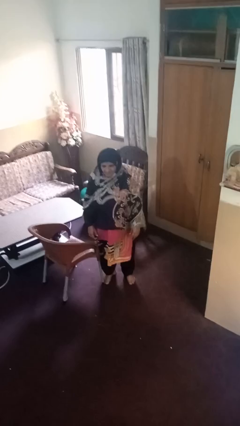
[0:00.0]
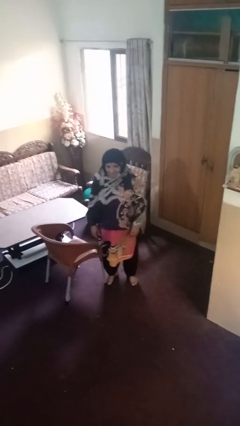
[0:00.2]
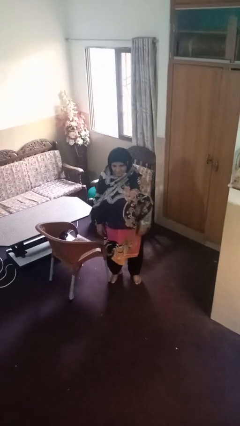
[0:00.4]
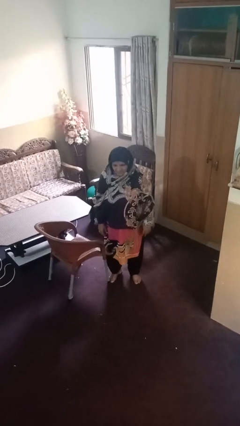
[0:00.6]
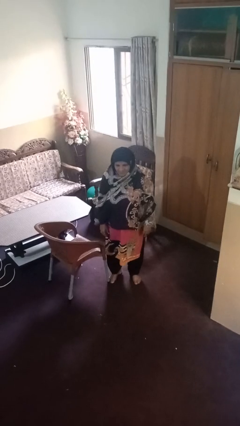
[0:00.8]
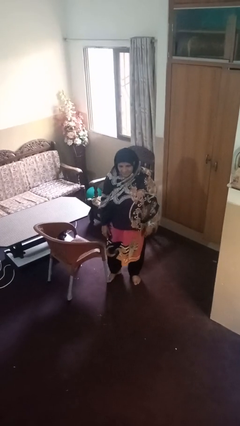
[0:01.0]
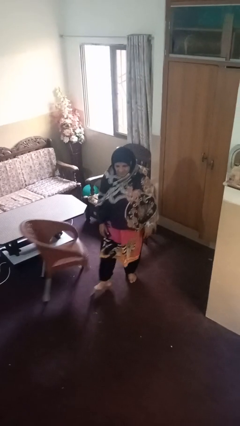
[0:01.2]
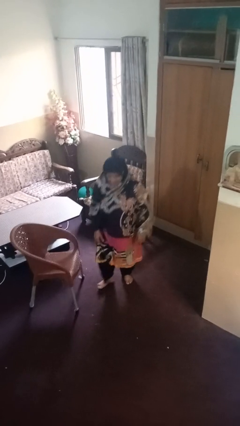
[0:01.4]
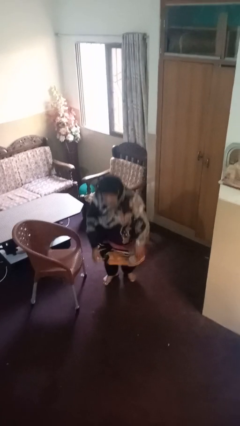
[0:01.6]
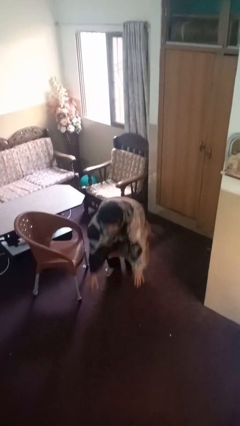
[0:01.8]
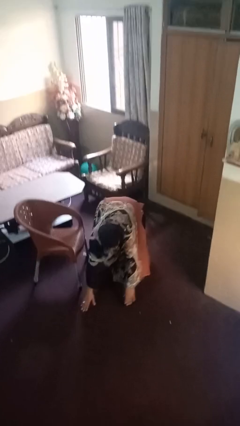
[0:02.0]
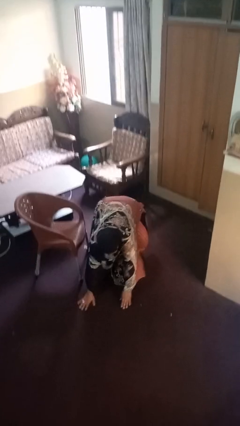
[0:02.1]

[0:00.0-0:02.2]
person trips on object on floor

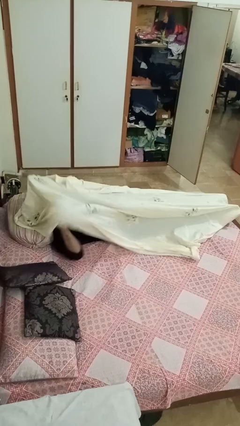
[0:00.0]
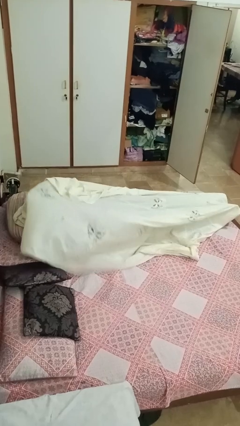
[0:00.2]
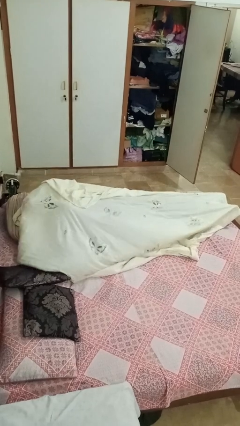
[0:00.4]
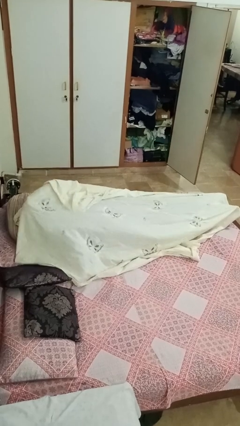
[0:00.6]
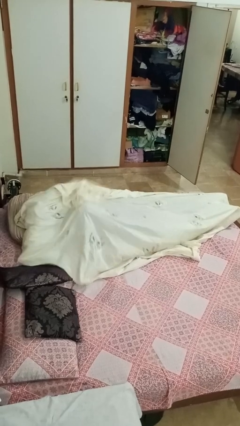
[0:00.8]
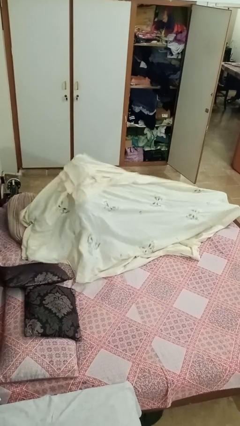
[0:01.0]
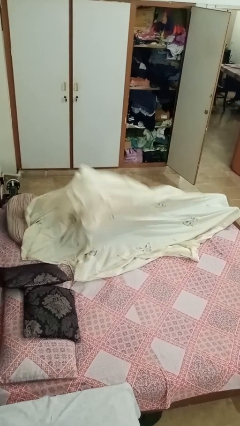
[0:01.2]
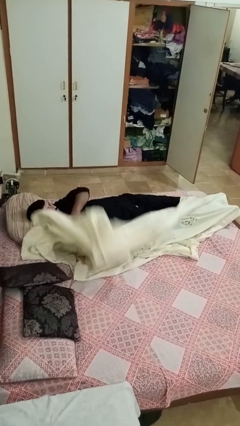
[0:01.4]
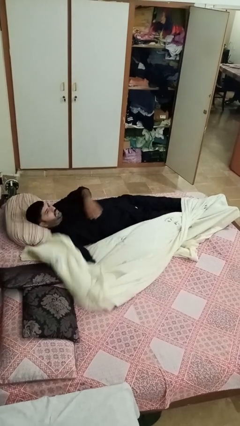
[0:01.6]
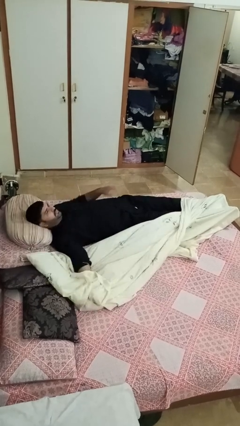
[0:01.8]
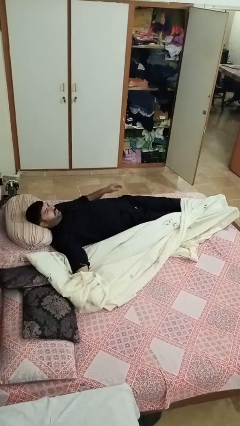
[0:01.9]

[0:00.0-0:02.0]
person uncovers with bedsheets

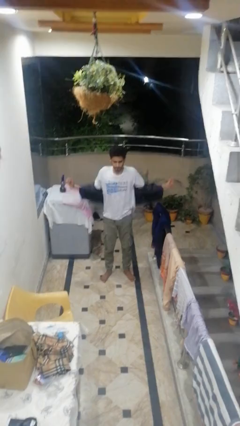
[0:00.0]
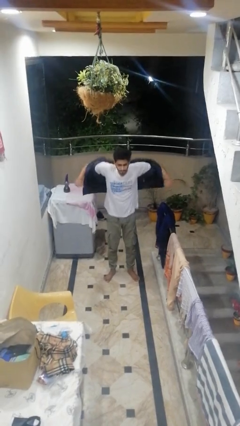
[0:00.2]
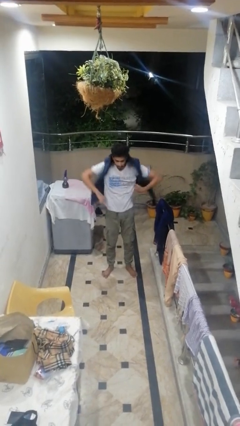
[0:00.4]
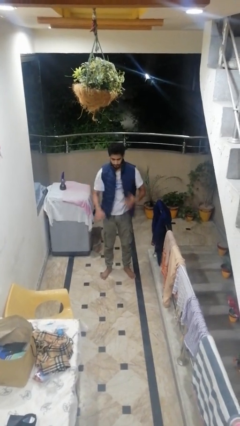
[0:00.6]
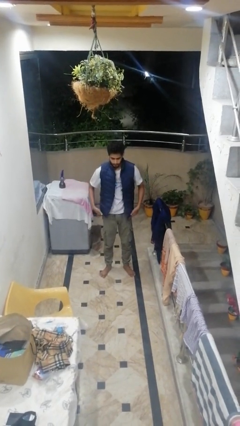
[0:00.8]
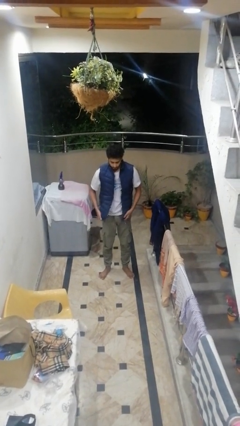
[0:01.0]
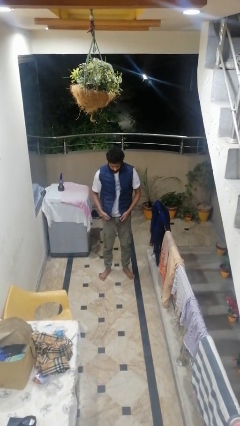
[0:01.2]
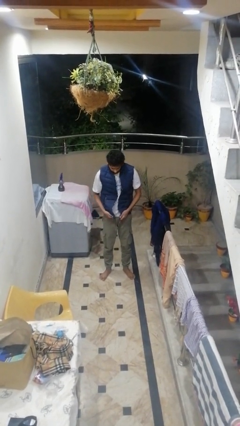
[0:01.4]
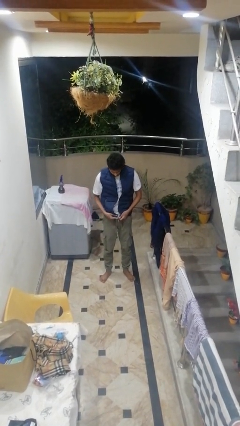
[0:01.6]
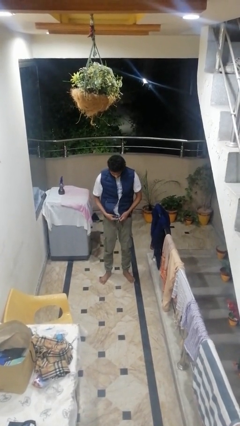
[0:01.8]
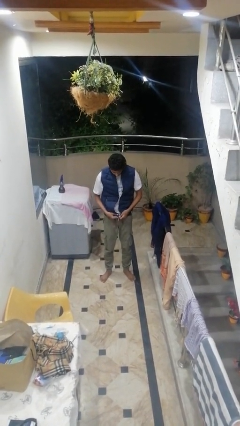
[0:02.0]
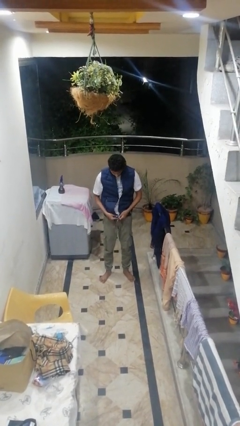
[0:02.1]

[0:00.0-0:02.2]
person puts on jacket

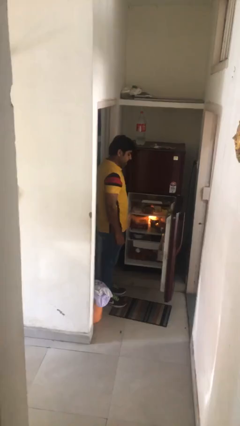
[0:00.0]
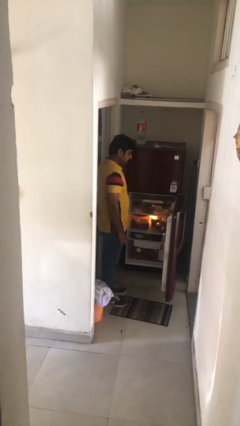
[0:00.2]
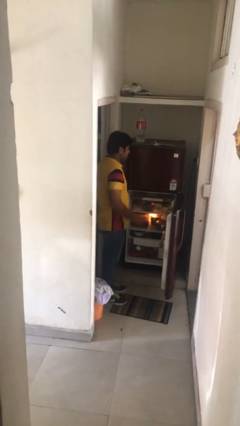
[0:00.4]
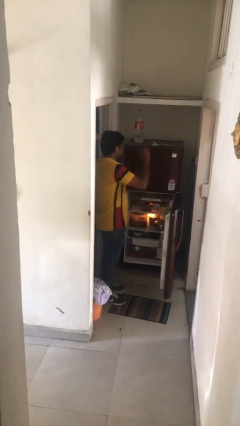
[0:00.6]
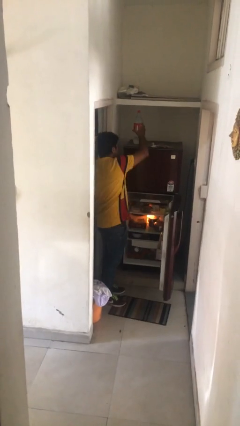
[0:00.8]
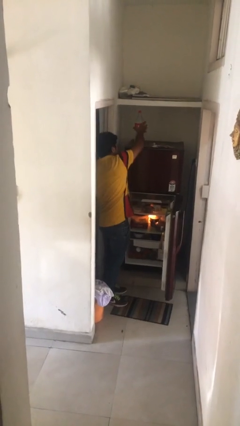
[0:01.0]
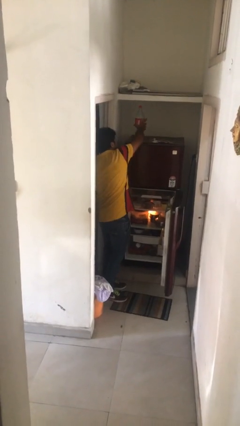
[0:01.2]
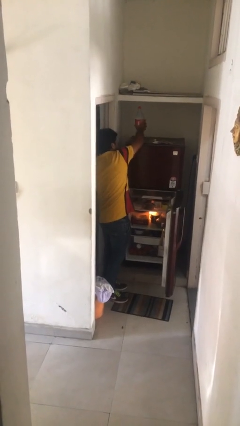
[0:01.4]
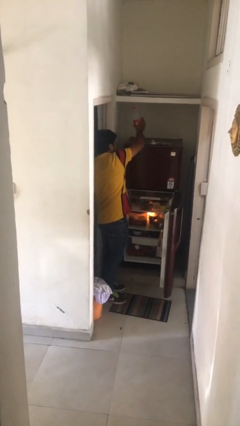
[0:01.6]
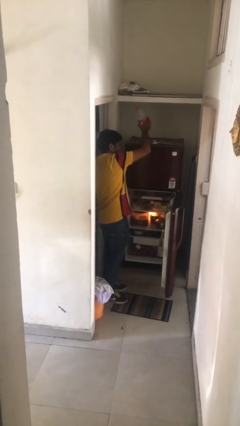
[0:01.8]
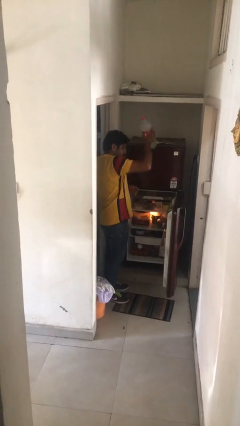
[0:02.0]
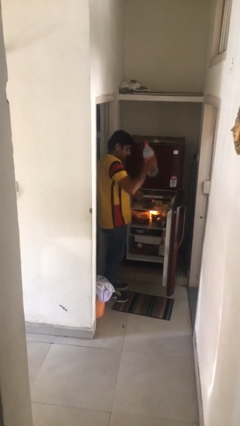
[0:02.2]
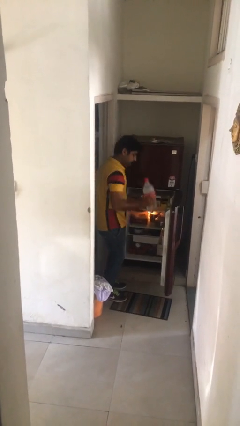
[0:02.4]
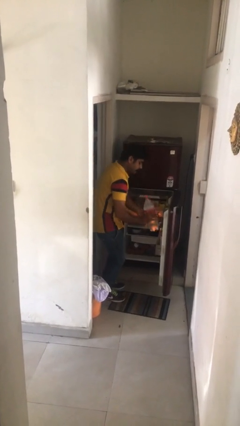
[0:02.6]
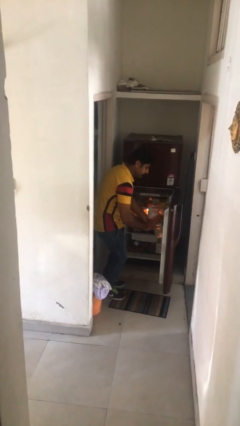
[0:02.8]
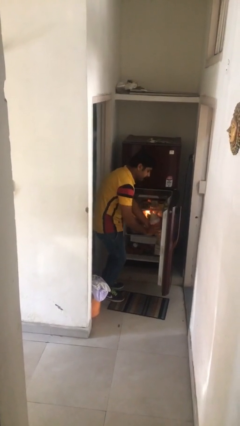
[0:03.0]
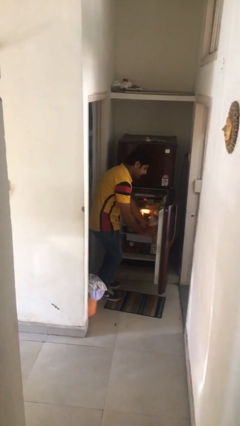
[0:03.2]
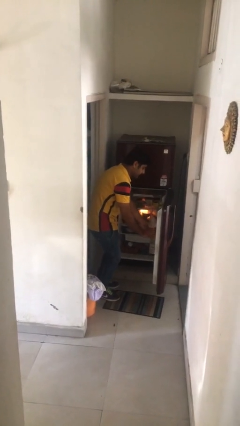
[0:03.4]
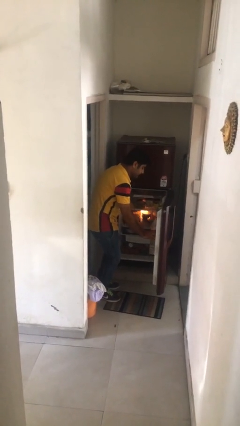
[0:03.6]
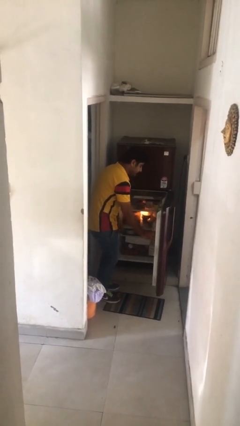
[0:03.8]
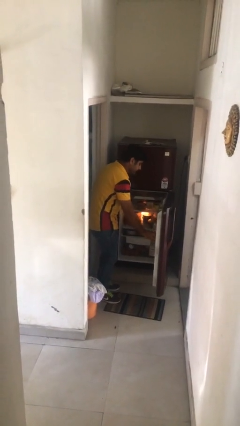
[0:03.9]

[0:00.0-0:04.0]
person loads groceries into refrigerator

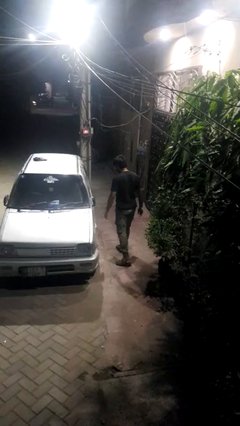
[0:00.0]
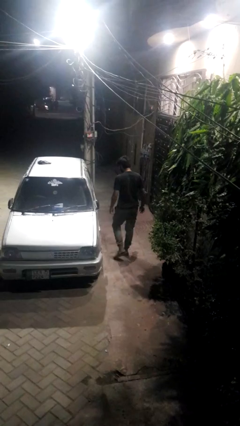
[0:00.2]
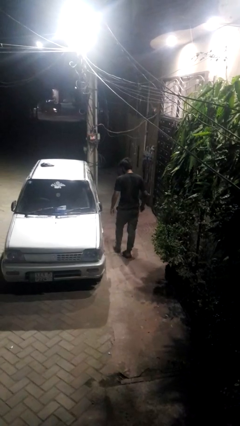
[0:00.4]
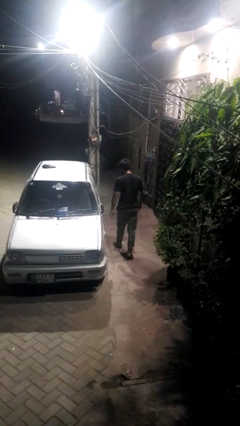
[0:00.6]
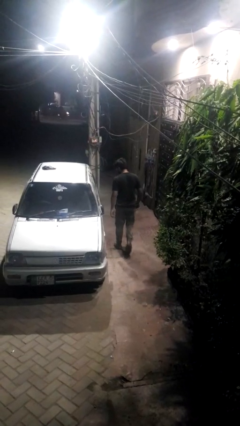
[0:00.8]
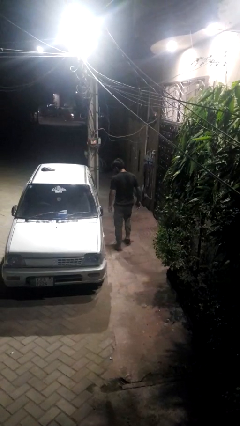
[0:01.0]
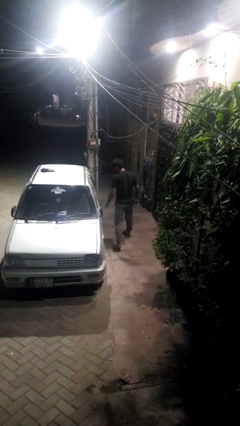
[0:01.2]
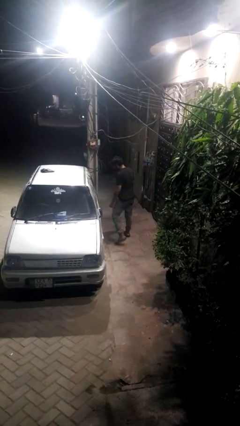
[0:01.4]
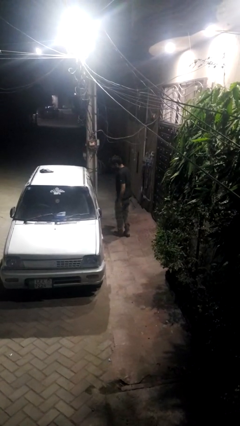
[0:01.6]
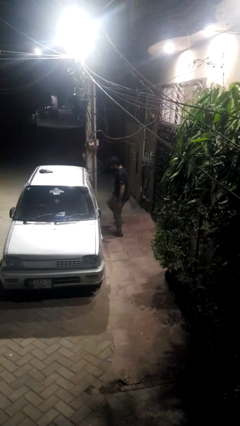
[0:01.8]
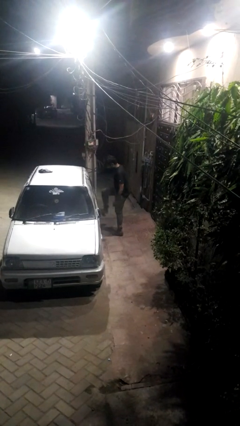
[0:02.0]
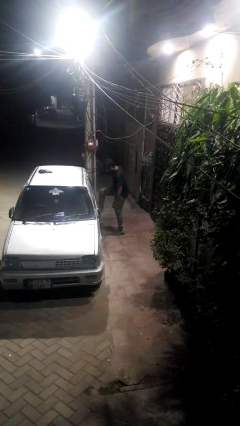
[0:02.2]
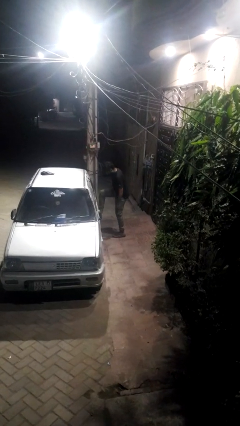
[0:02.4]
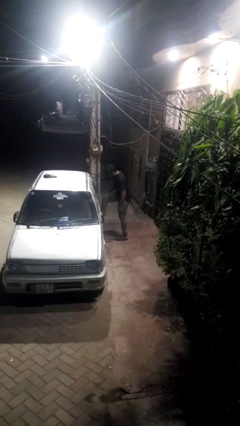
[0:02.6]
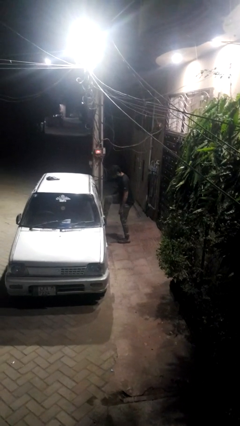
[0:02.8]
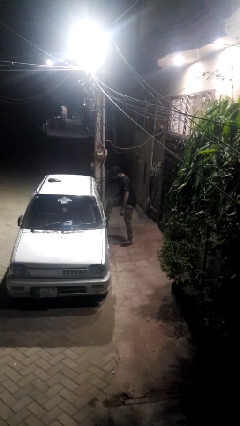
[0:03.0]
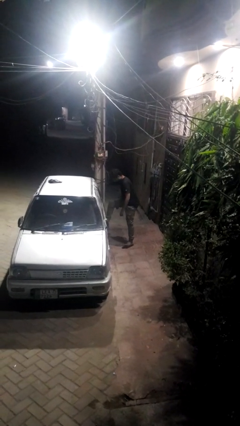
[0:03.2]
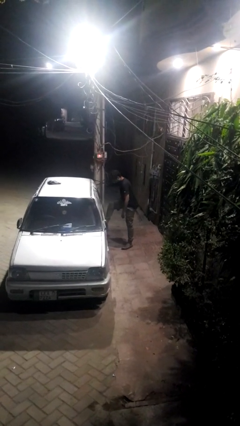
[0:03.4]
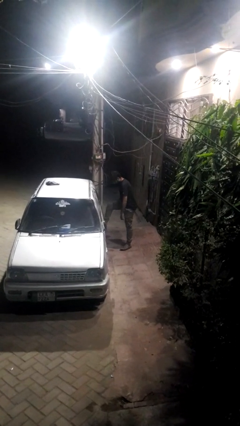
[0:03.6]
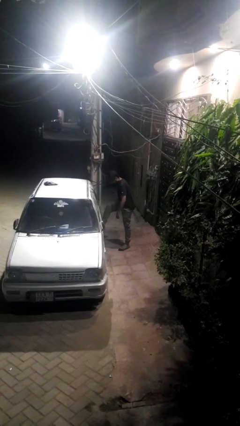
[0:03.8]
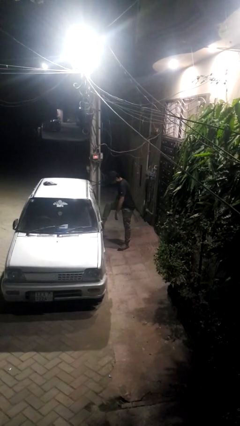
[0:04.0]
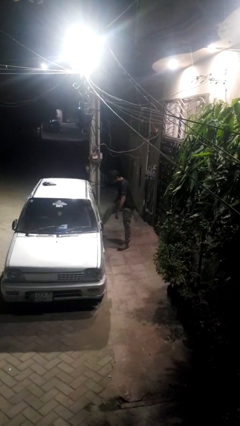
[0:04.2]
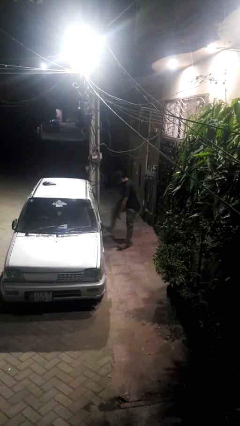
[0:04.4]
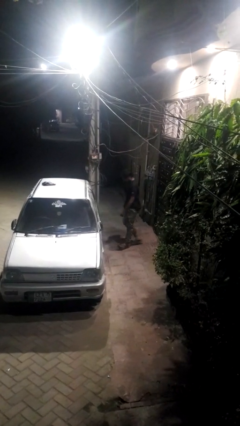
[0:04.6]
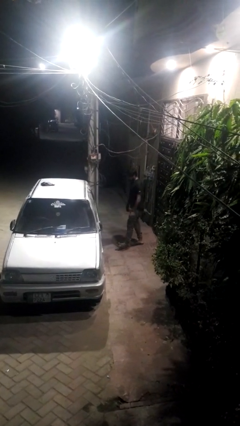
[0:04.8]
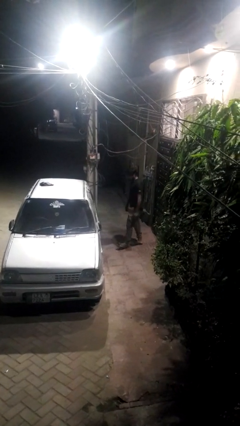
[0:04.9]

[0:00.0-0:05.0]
person kicks car tires

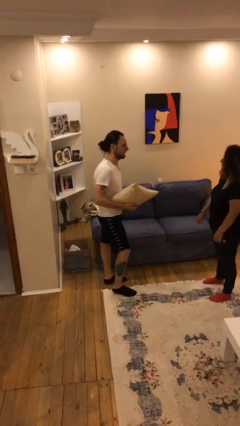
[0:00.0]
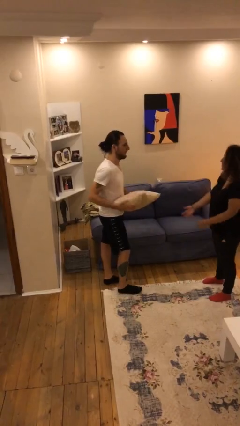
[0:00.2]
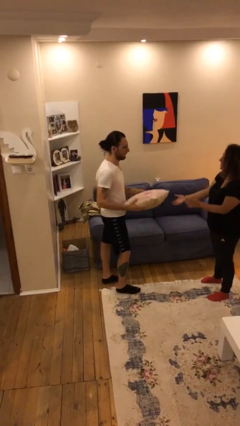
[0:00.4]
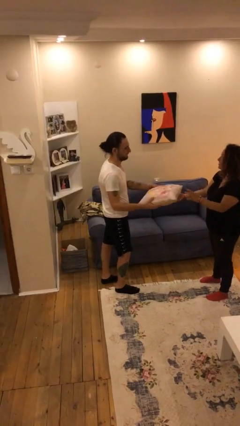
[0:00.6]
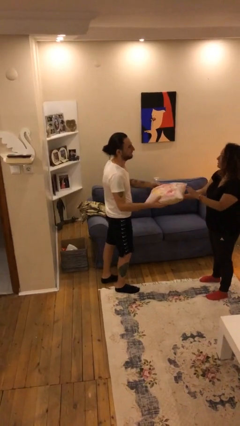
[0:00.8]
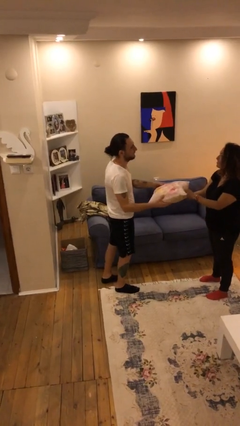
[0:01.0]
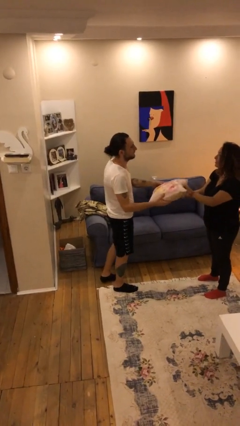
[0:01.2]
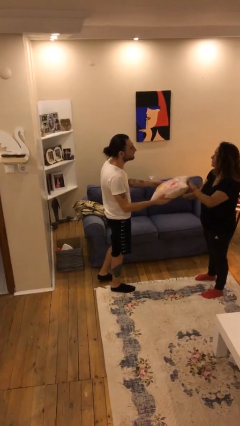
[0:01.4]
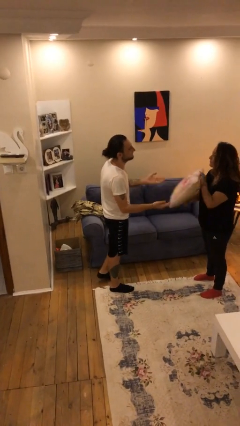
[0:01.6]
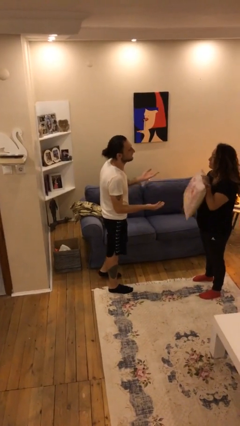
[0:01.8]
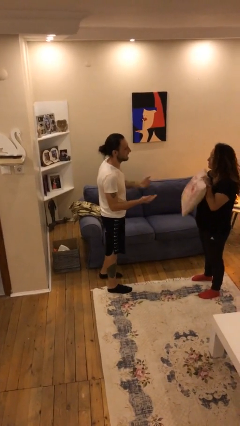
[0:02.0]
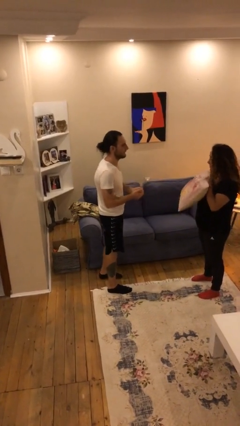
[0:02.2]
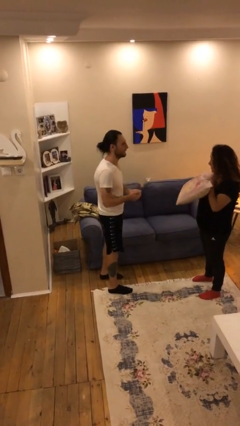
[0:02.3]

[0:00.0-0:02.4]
person transfers object to person
